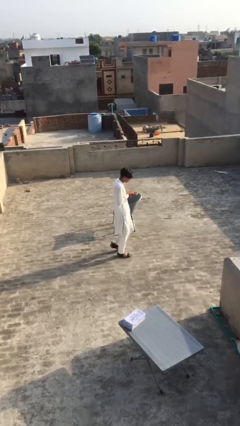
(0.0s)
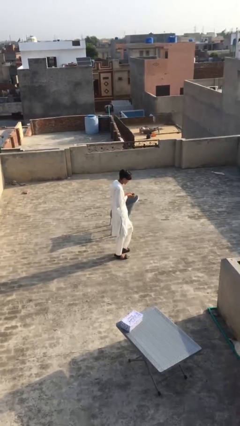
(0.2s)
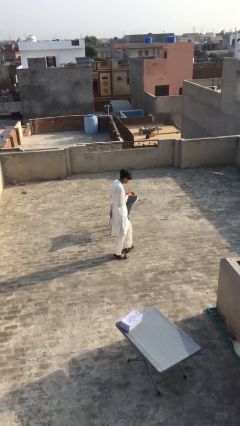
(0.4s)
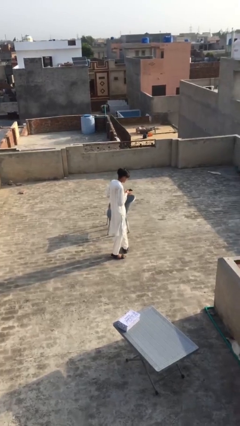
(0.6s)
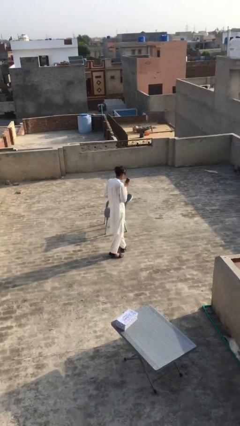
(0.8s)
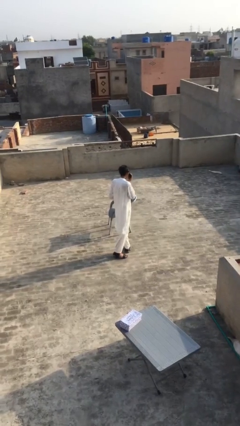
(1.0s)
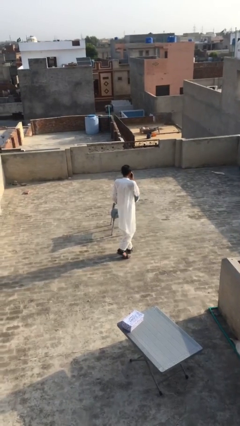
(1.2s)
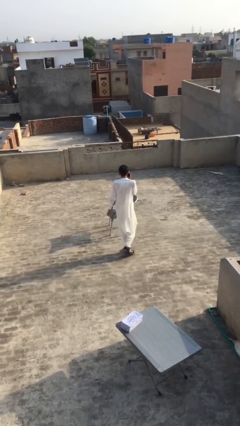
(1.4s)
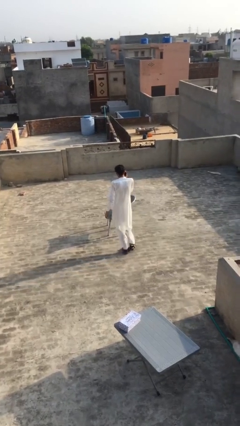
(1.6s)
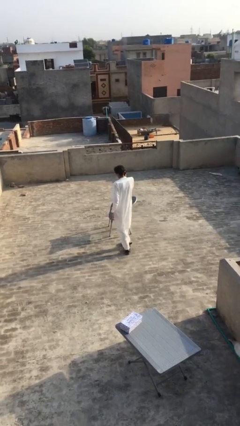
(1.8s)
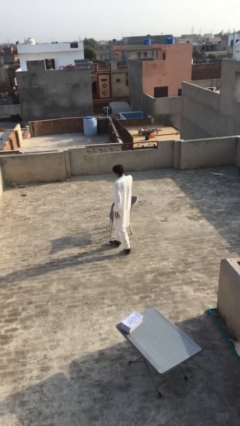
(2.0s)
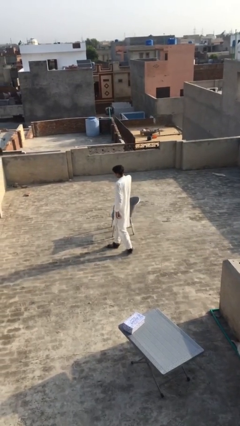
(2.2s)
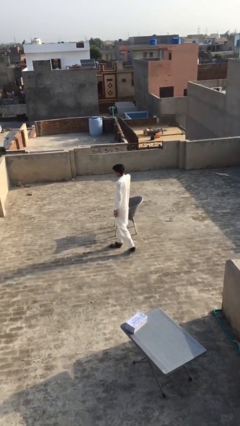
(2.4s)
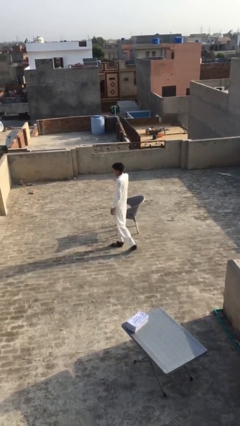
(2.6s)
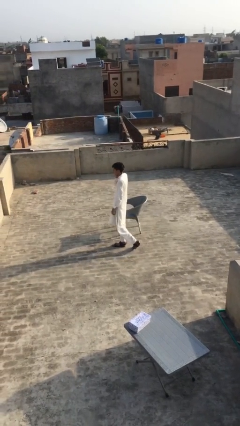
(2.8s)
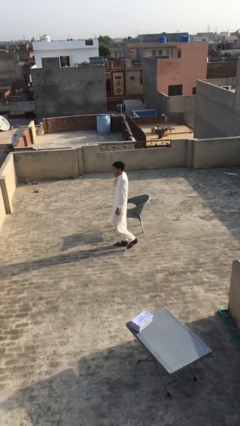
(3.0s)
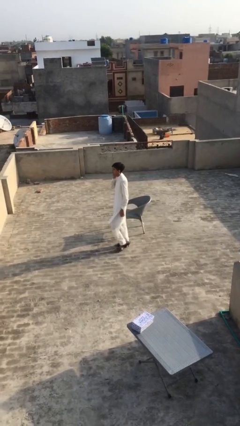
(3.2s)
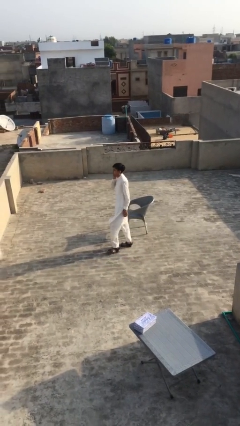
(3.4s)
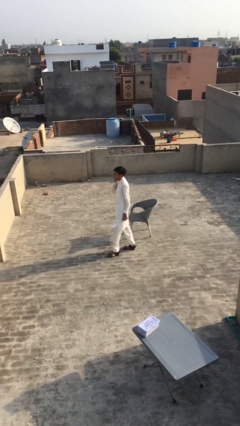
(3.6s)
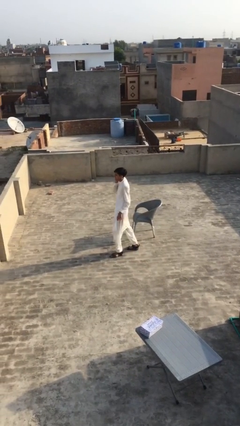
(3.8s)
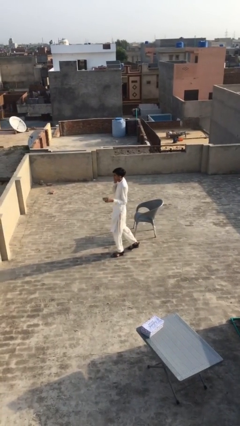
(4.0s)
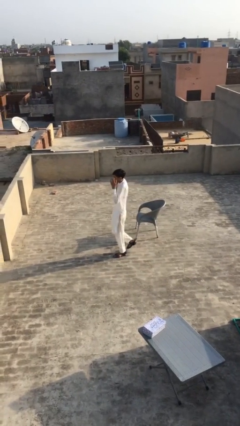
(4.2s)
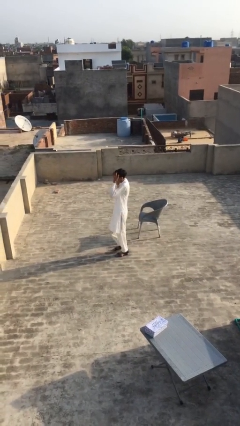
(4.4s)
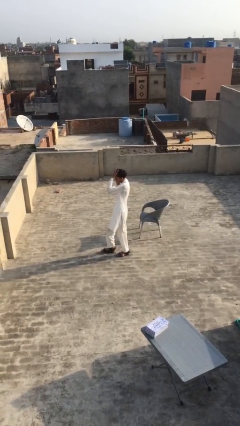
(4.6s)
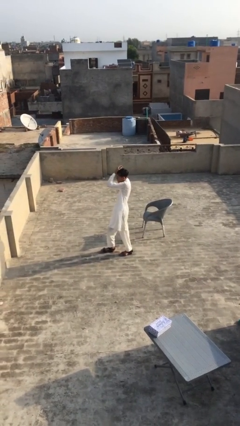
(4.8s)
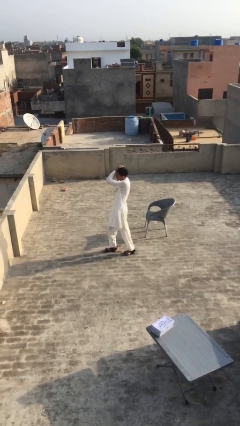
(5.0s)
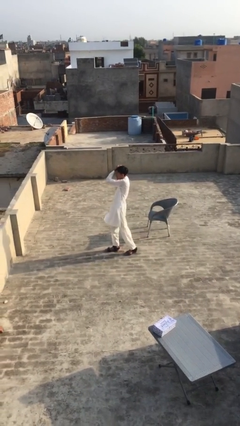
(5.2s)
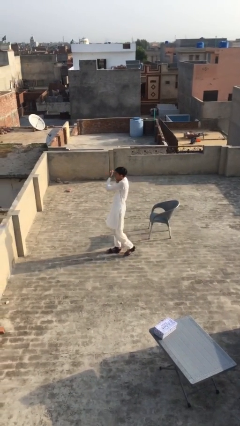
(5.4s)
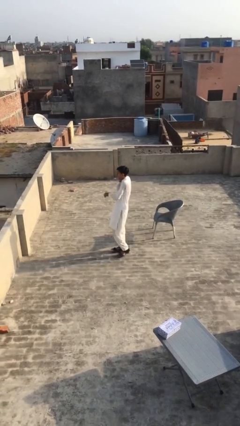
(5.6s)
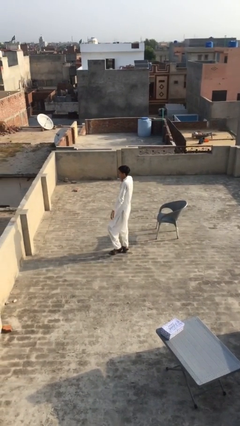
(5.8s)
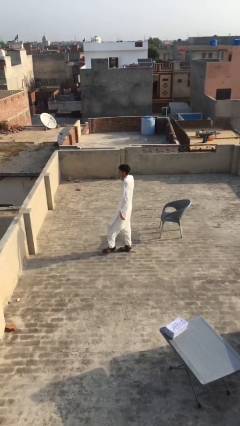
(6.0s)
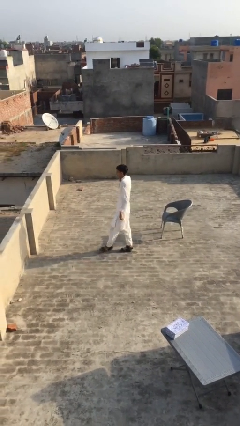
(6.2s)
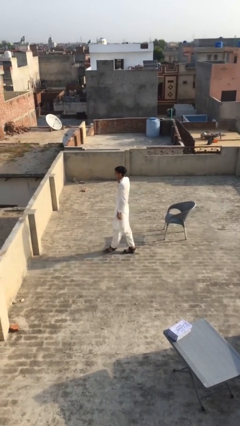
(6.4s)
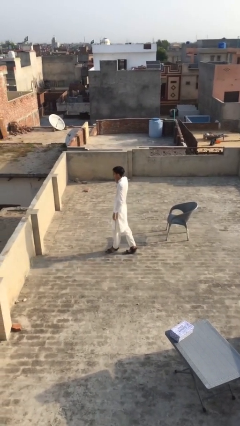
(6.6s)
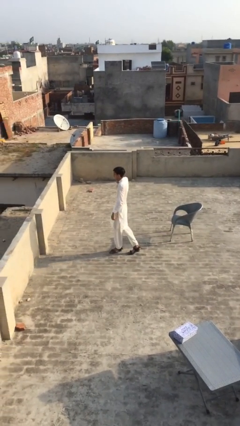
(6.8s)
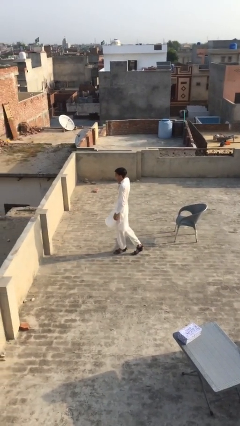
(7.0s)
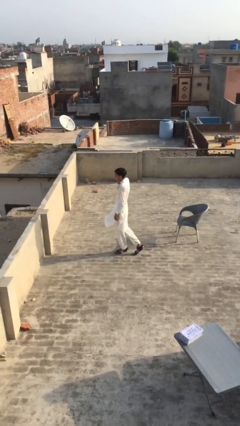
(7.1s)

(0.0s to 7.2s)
person talks on phone

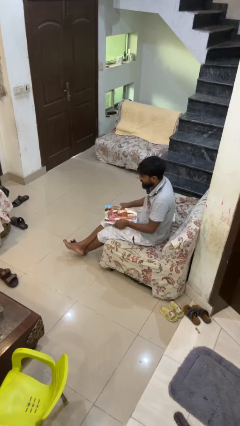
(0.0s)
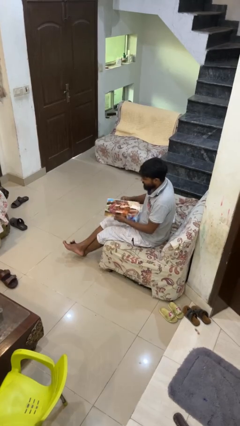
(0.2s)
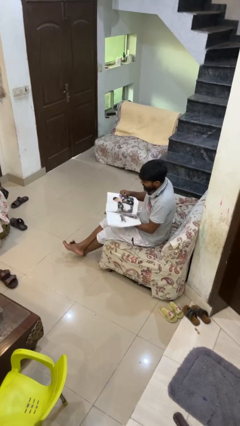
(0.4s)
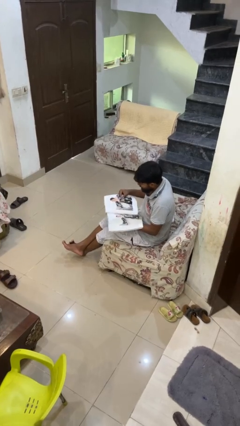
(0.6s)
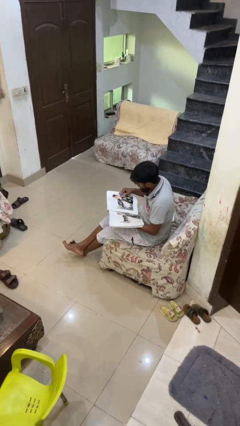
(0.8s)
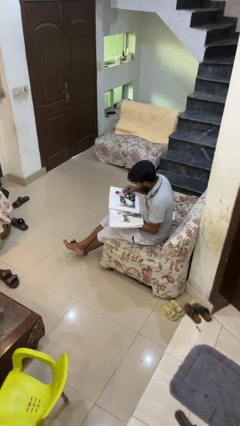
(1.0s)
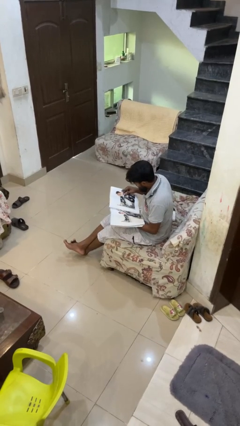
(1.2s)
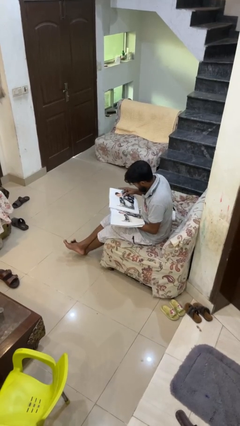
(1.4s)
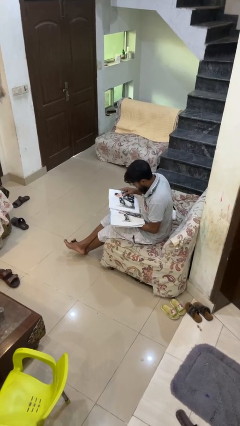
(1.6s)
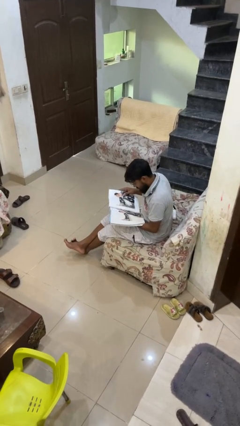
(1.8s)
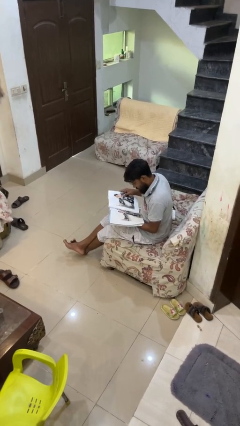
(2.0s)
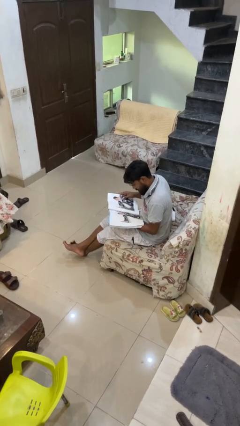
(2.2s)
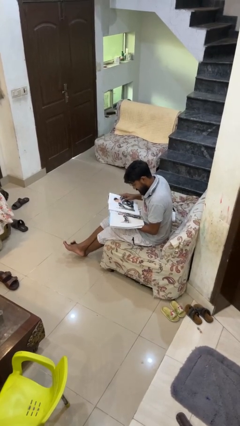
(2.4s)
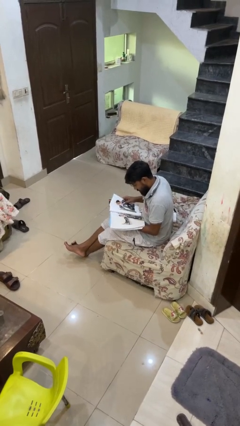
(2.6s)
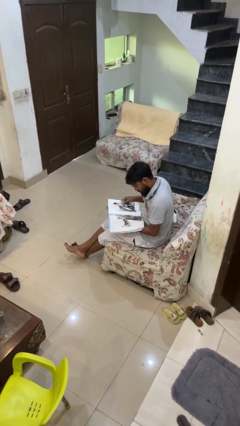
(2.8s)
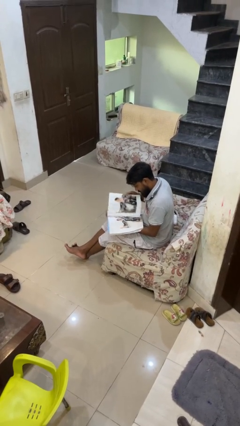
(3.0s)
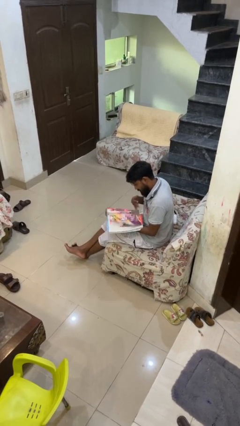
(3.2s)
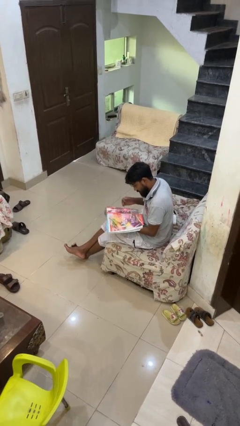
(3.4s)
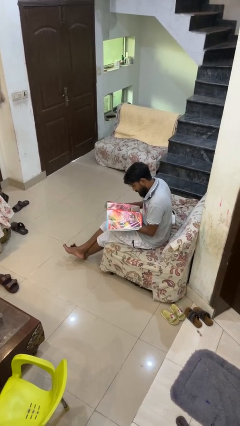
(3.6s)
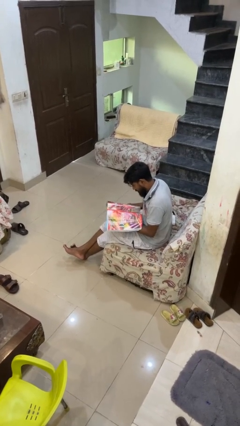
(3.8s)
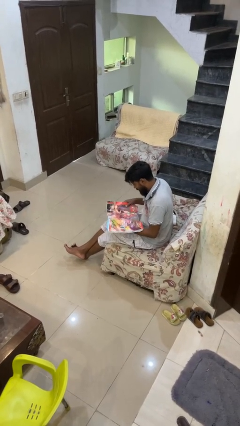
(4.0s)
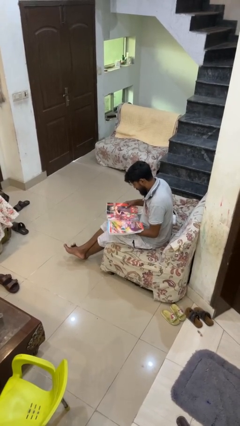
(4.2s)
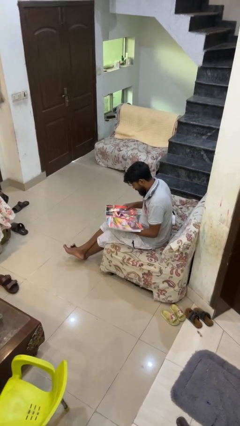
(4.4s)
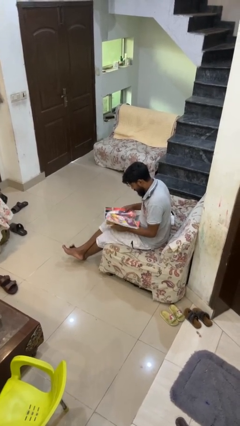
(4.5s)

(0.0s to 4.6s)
person reads magazine

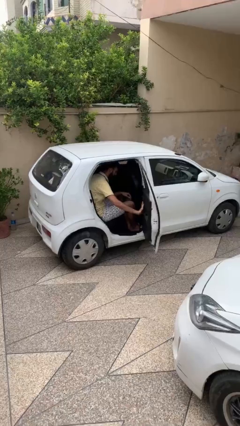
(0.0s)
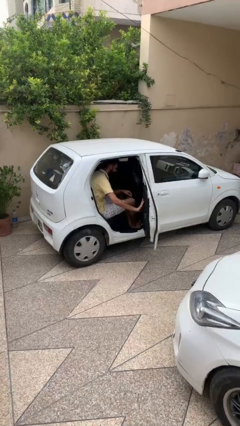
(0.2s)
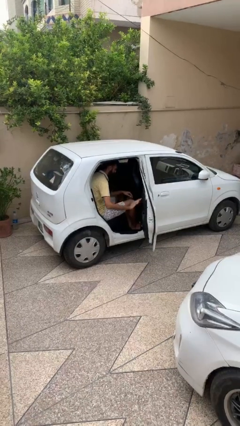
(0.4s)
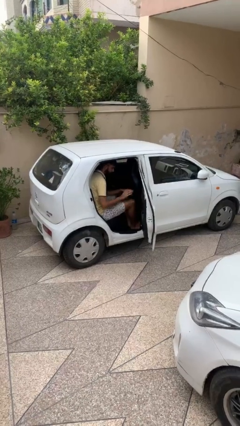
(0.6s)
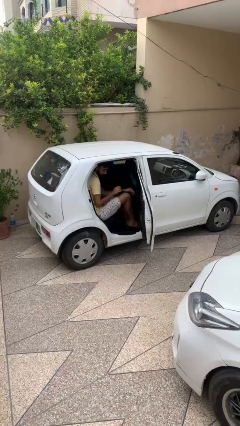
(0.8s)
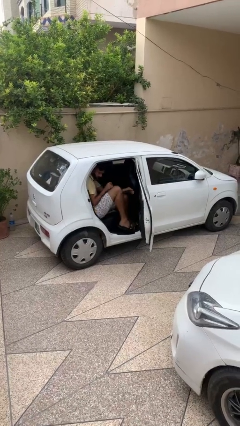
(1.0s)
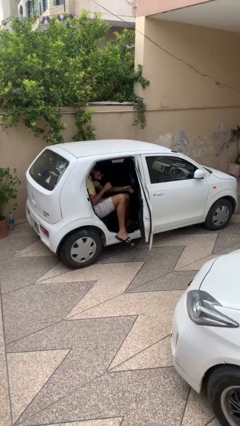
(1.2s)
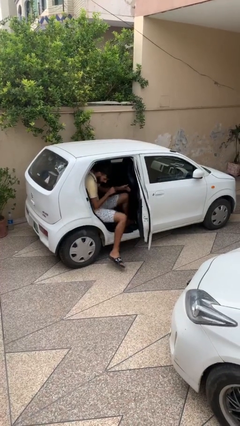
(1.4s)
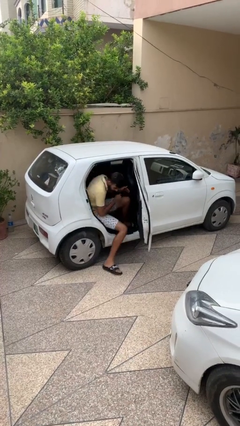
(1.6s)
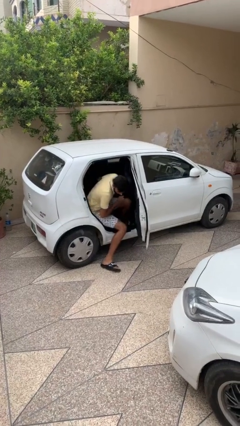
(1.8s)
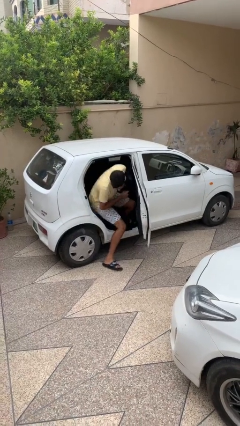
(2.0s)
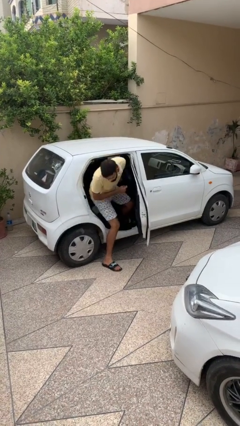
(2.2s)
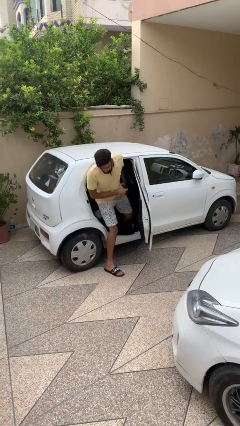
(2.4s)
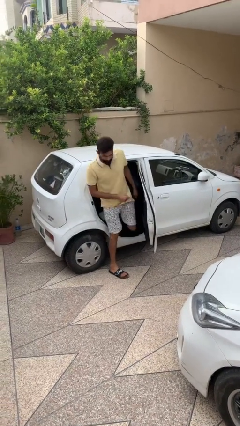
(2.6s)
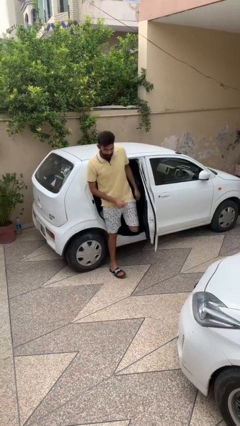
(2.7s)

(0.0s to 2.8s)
person exits car

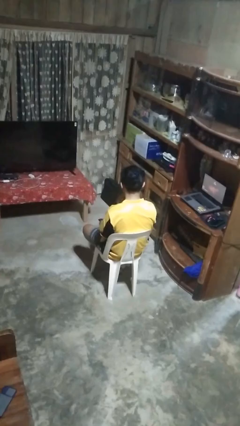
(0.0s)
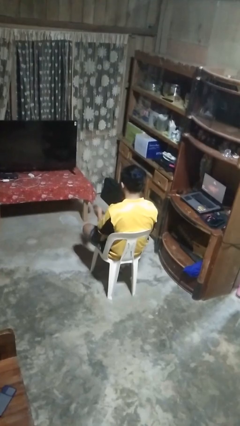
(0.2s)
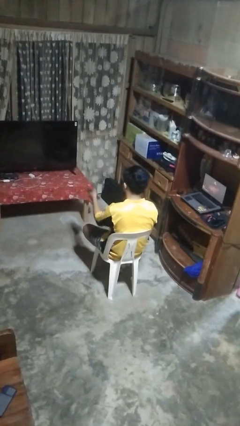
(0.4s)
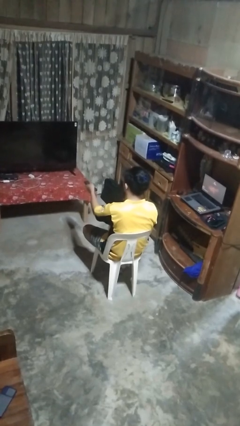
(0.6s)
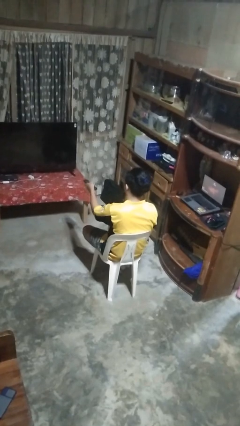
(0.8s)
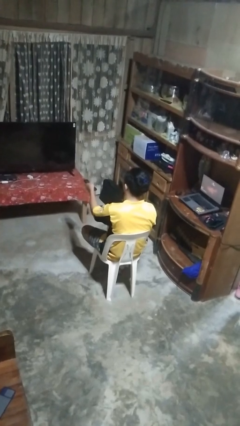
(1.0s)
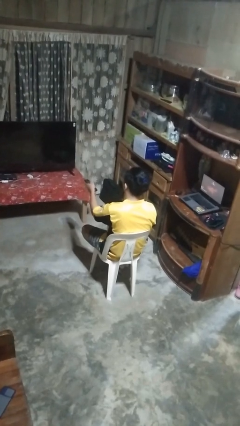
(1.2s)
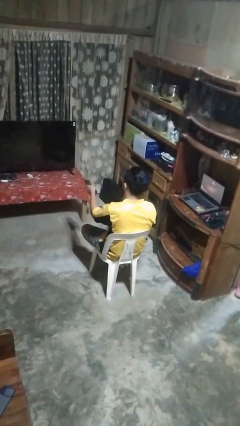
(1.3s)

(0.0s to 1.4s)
person uses television remote

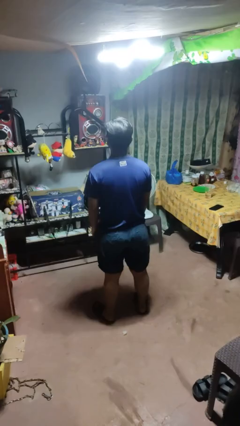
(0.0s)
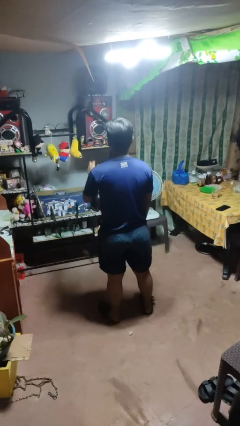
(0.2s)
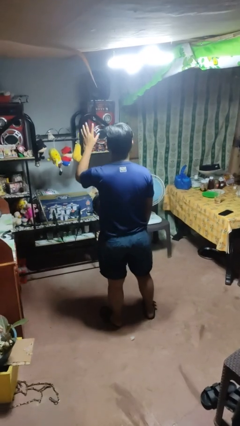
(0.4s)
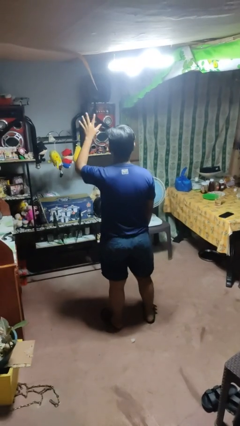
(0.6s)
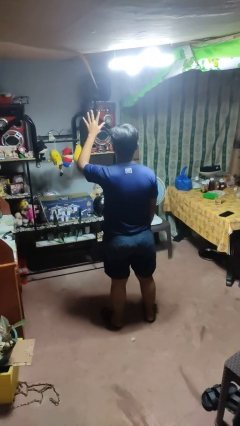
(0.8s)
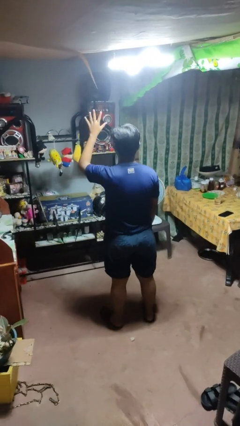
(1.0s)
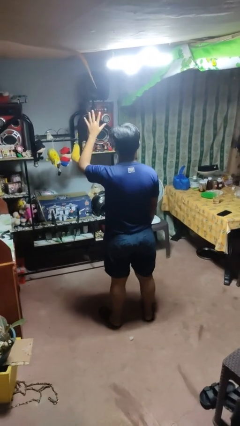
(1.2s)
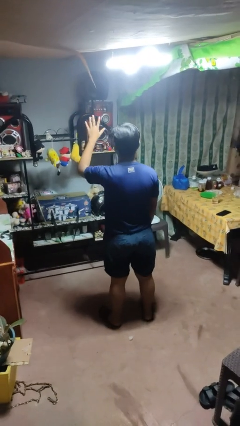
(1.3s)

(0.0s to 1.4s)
person gestures number five
